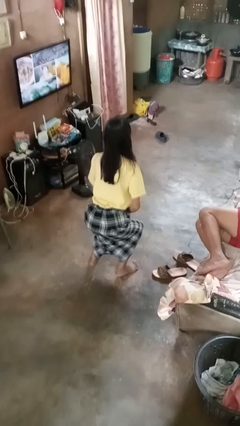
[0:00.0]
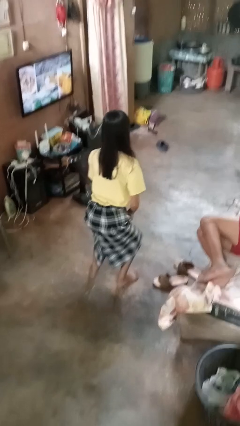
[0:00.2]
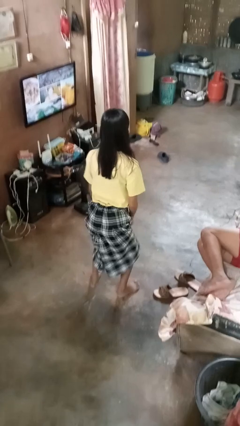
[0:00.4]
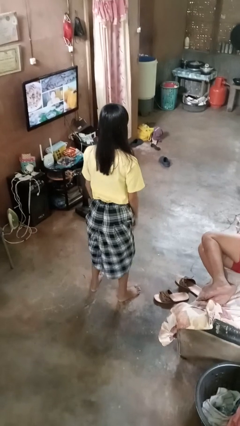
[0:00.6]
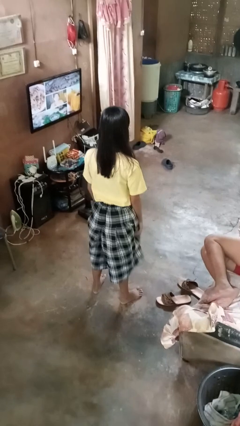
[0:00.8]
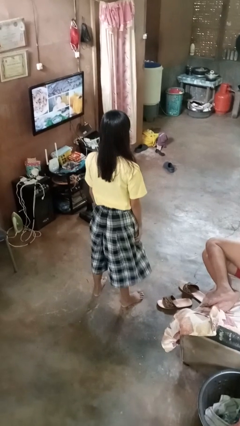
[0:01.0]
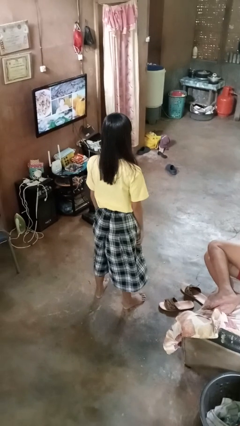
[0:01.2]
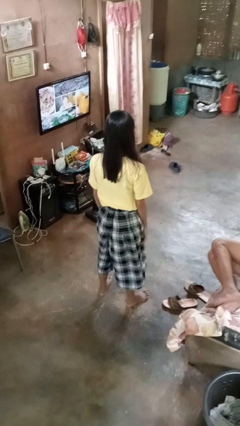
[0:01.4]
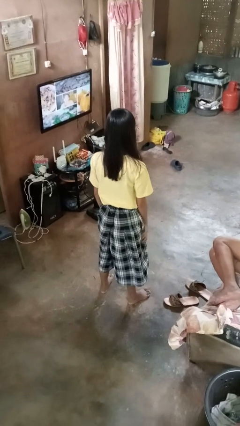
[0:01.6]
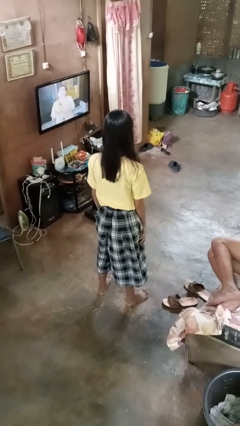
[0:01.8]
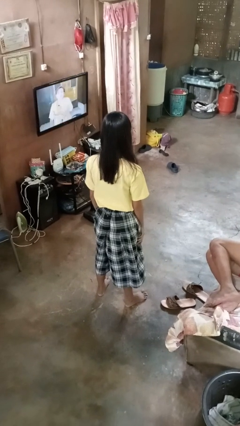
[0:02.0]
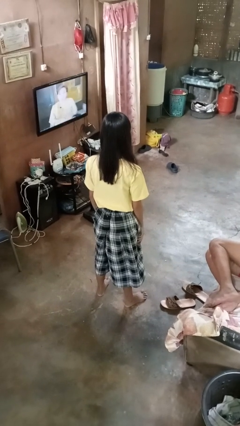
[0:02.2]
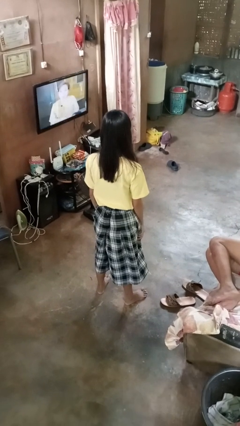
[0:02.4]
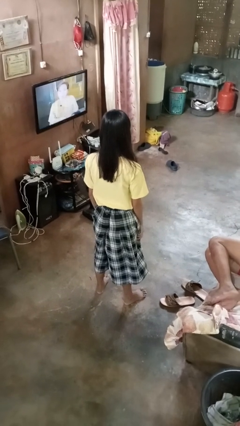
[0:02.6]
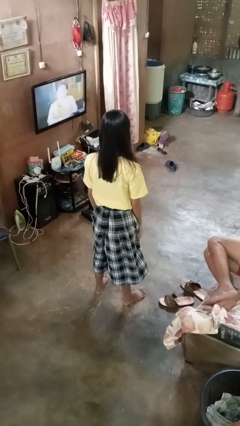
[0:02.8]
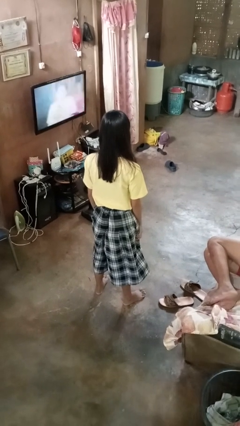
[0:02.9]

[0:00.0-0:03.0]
person stands up

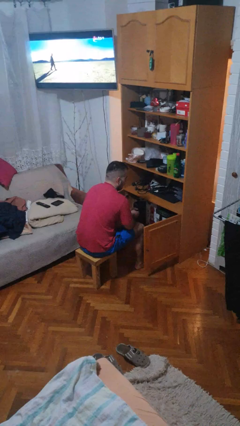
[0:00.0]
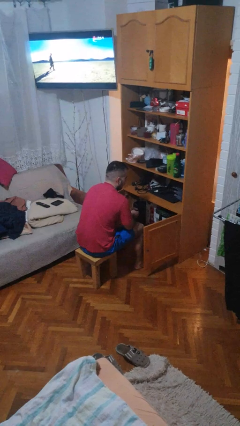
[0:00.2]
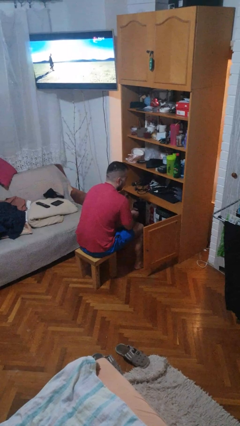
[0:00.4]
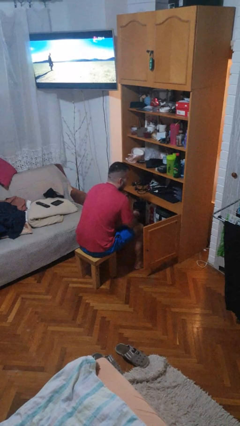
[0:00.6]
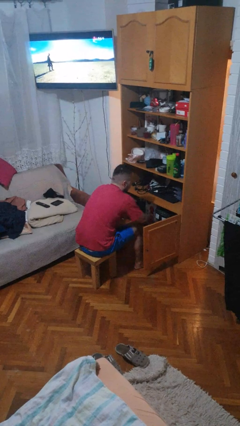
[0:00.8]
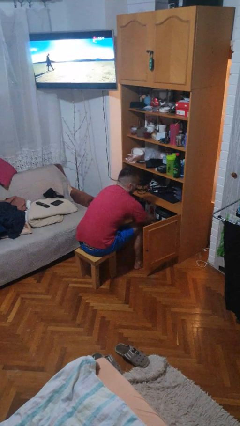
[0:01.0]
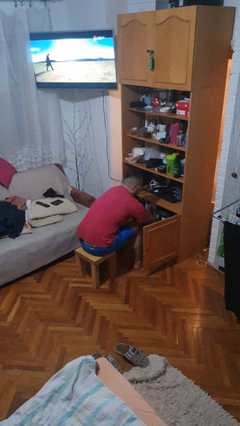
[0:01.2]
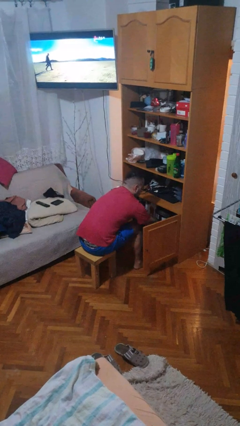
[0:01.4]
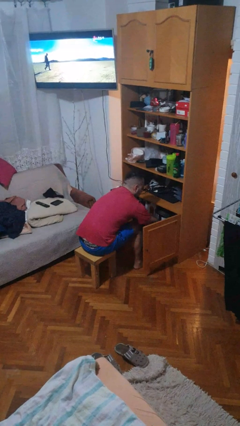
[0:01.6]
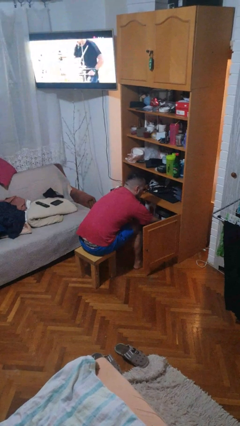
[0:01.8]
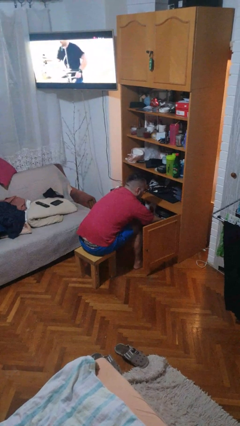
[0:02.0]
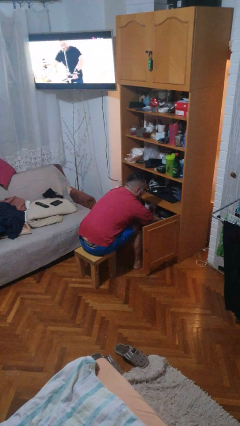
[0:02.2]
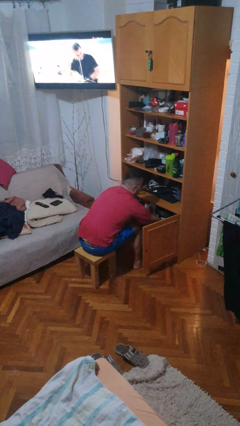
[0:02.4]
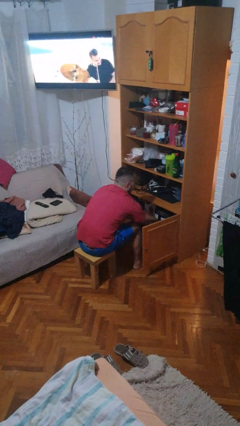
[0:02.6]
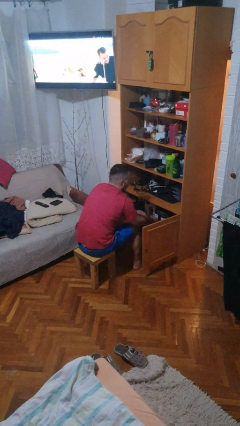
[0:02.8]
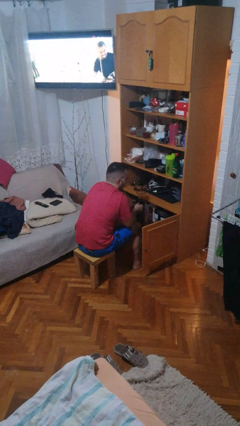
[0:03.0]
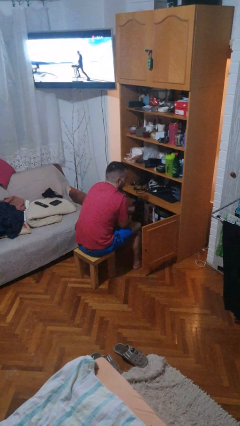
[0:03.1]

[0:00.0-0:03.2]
person searches in cabinet

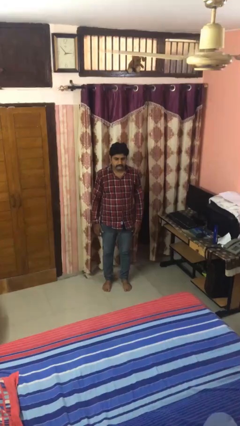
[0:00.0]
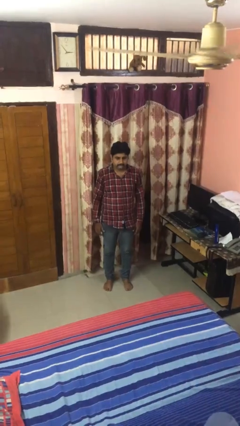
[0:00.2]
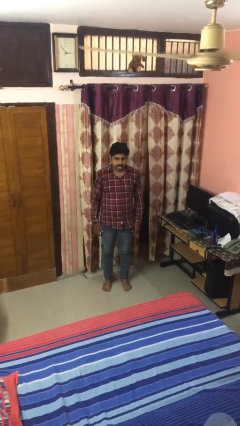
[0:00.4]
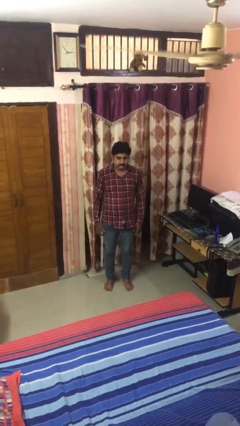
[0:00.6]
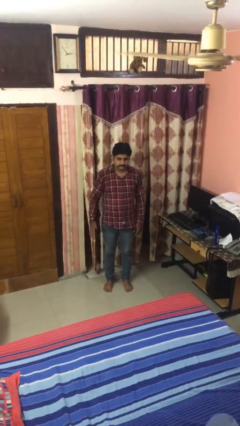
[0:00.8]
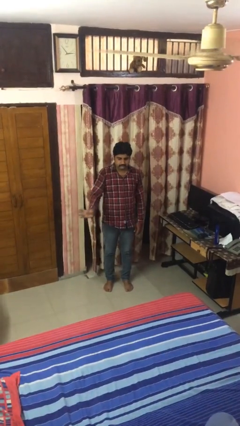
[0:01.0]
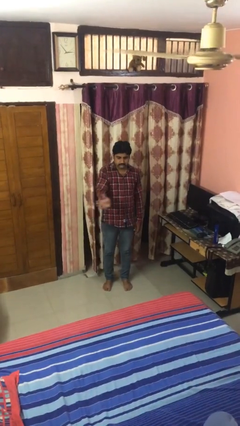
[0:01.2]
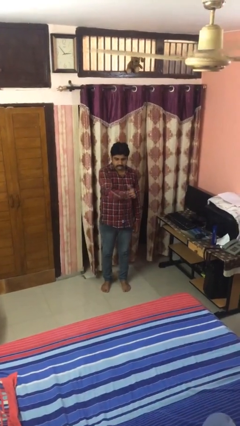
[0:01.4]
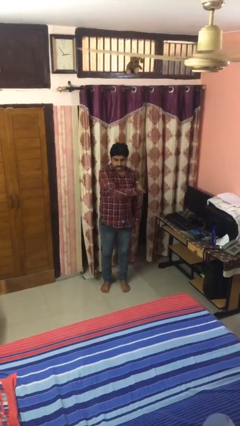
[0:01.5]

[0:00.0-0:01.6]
person gestures swipe left

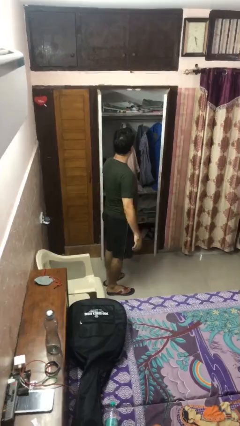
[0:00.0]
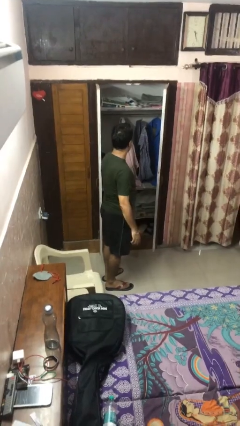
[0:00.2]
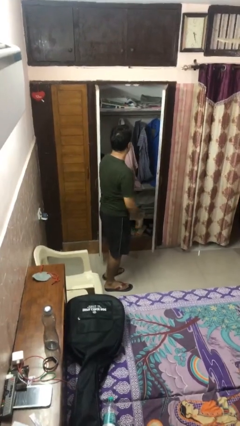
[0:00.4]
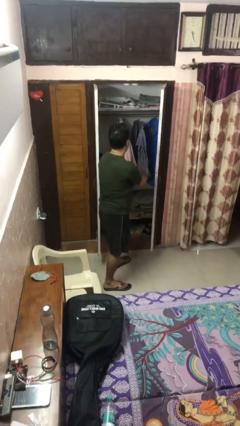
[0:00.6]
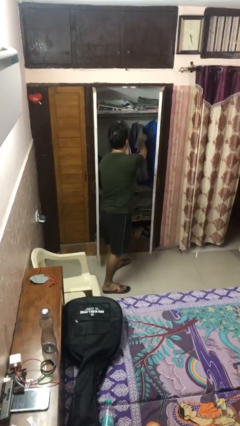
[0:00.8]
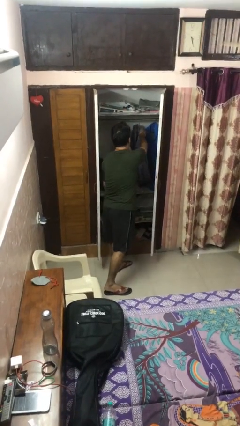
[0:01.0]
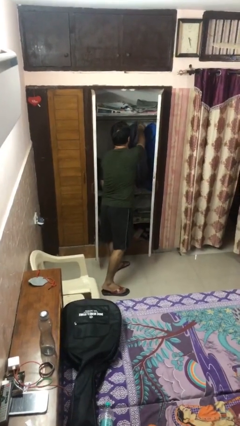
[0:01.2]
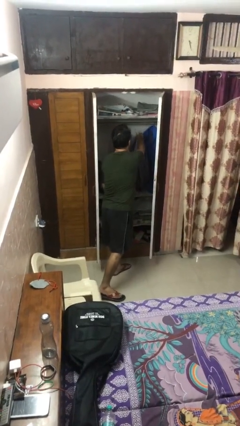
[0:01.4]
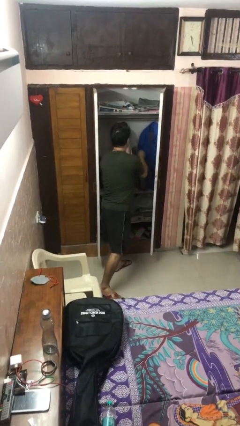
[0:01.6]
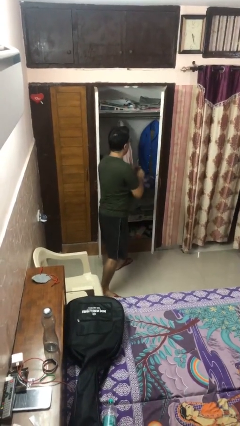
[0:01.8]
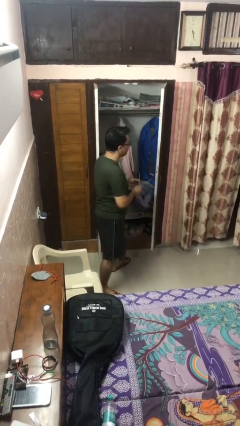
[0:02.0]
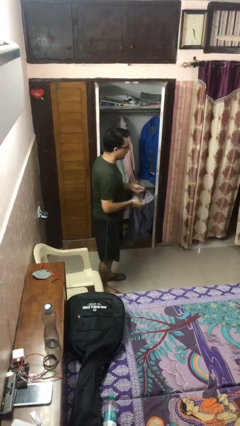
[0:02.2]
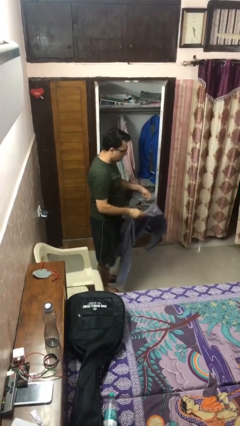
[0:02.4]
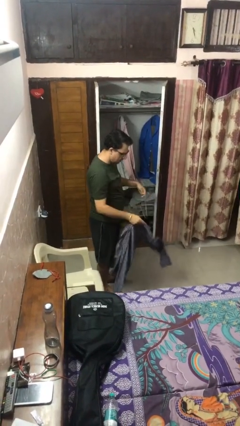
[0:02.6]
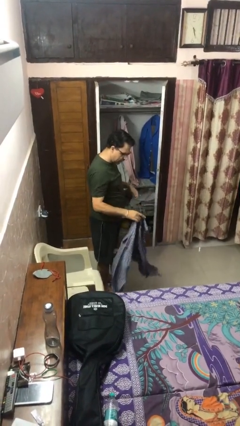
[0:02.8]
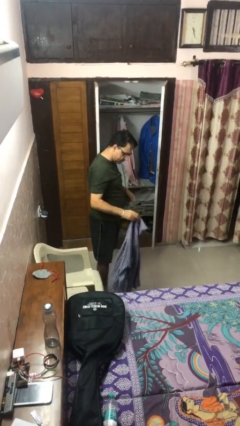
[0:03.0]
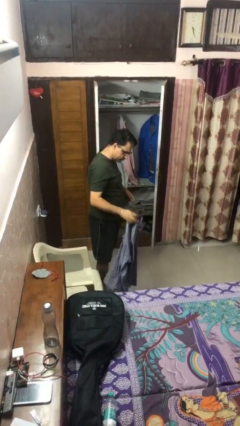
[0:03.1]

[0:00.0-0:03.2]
person takes clothes from closet

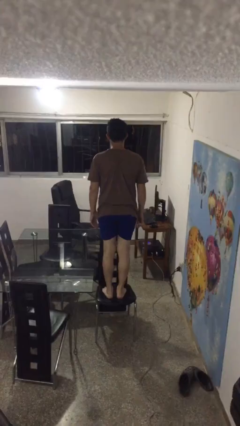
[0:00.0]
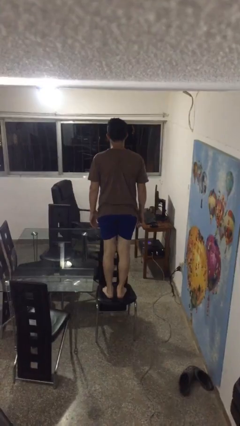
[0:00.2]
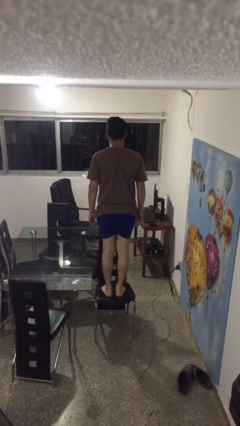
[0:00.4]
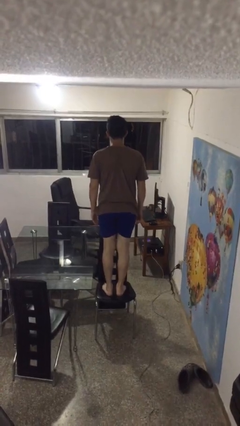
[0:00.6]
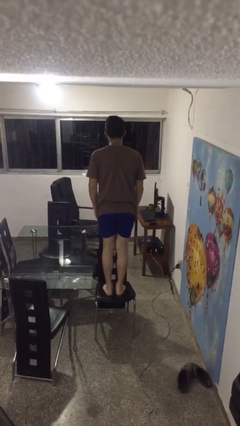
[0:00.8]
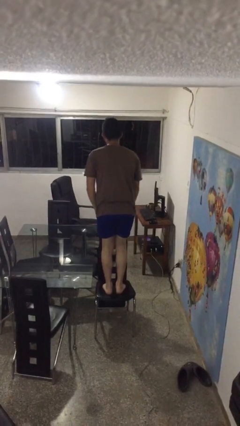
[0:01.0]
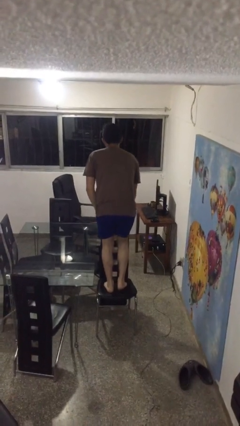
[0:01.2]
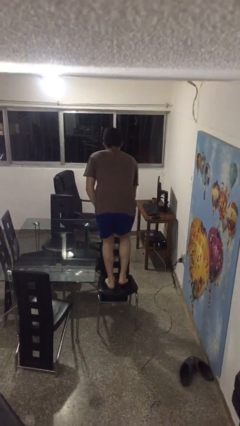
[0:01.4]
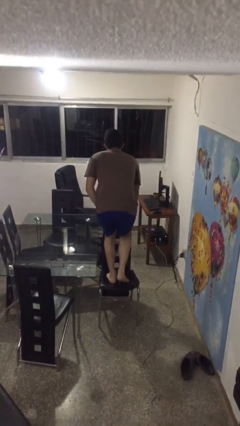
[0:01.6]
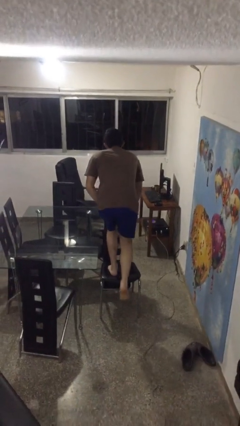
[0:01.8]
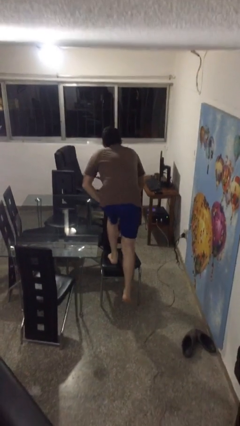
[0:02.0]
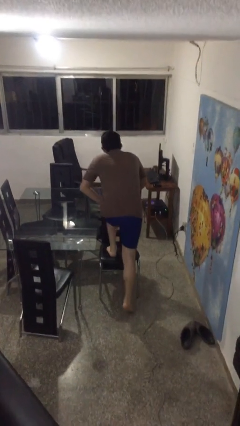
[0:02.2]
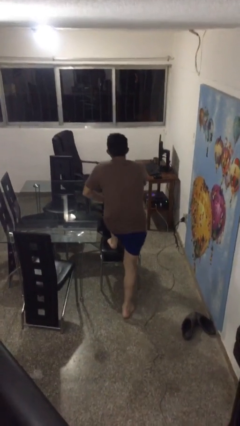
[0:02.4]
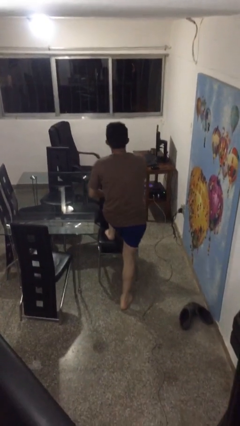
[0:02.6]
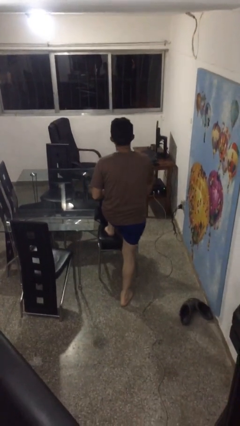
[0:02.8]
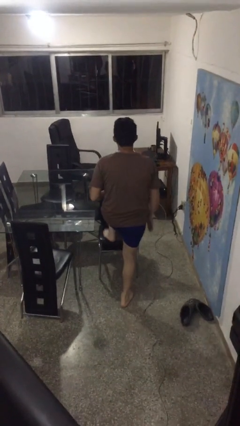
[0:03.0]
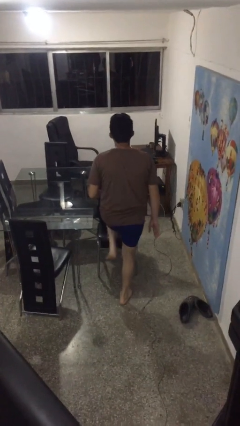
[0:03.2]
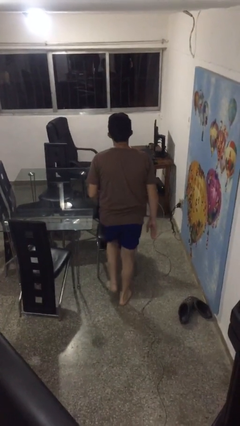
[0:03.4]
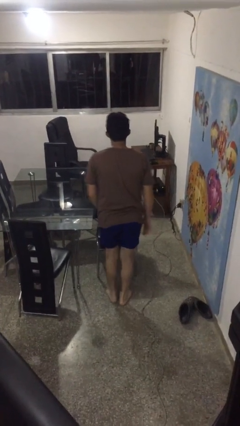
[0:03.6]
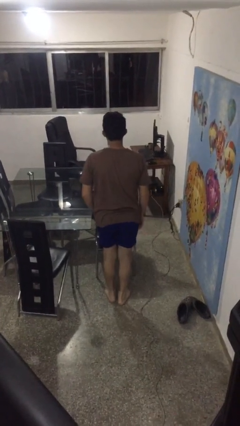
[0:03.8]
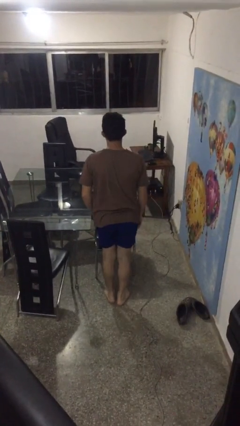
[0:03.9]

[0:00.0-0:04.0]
person climbs off chair

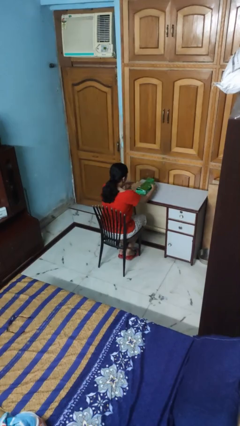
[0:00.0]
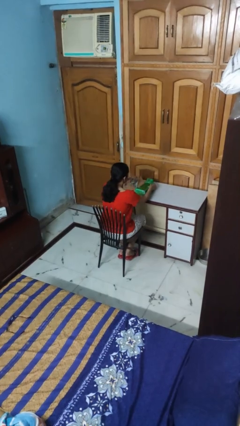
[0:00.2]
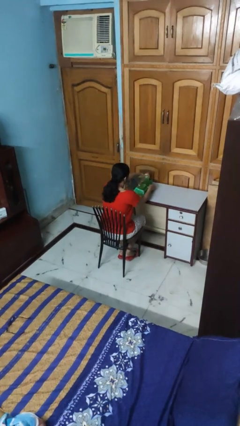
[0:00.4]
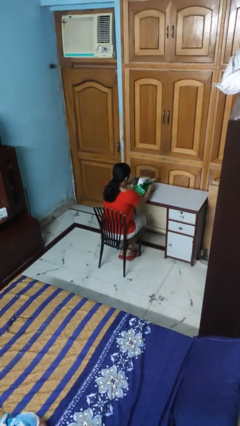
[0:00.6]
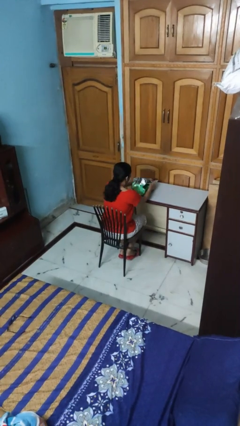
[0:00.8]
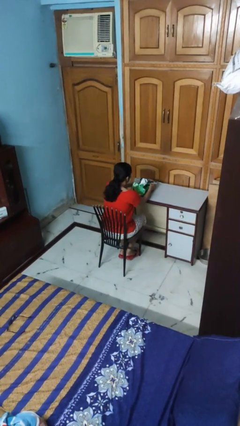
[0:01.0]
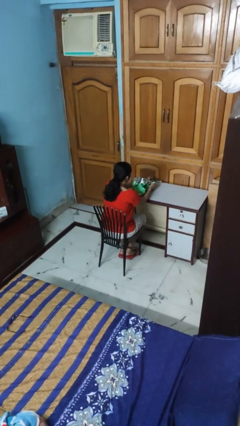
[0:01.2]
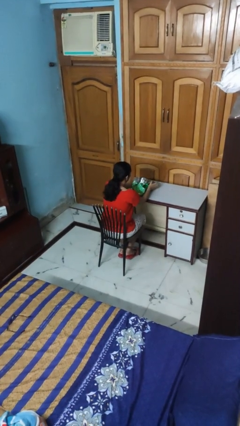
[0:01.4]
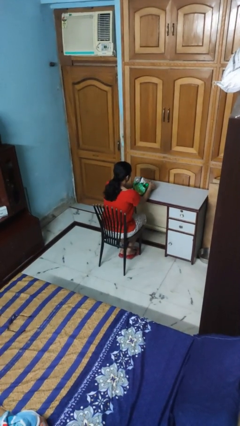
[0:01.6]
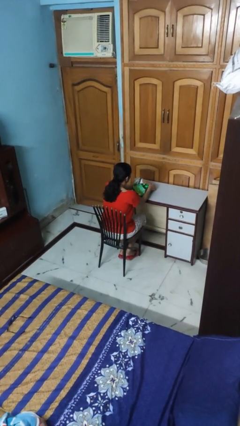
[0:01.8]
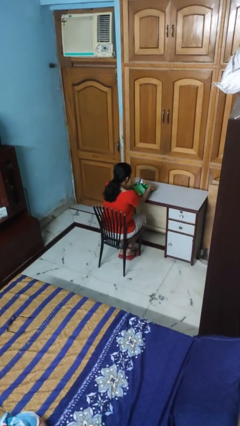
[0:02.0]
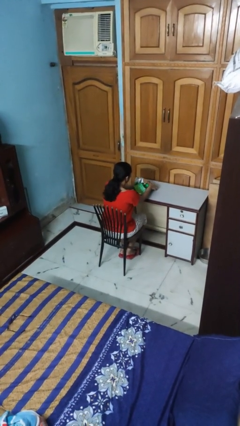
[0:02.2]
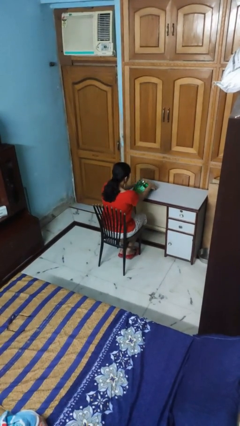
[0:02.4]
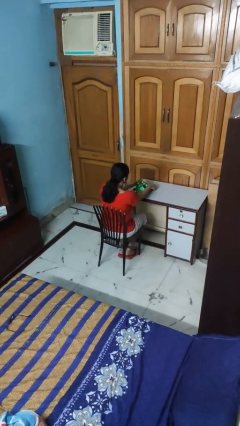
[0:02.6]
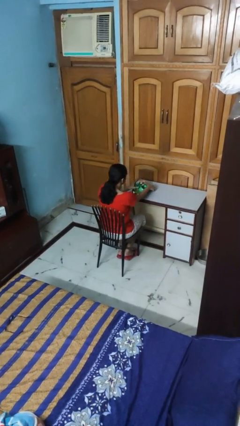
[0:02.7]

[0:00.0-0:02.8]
person wraps box
